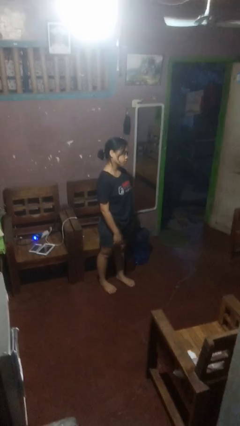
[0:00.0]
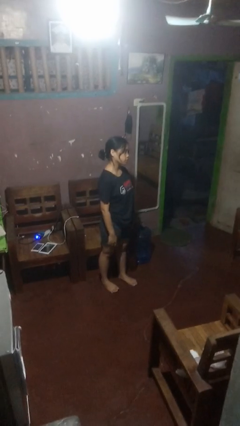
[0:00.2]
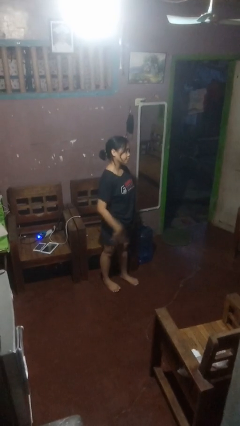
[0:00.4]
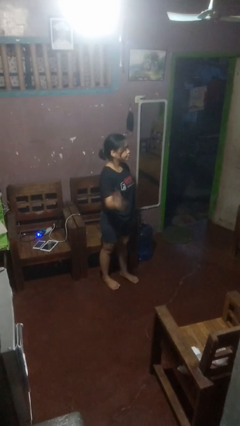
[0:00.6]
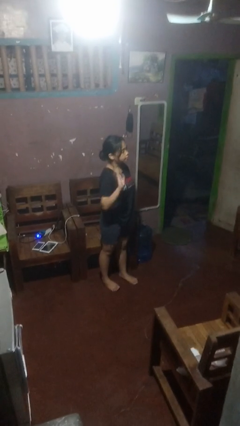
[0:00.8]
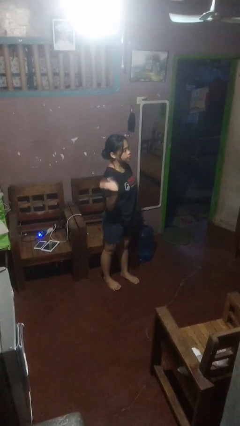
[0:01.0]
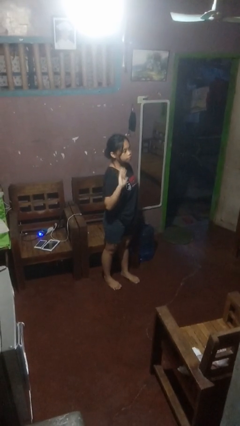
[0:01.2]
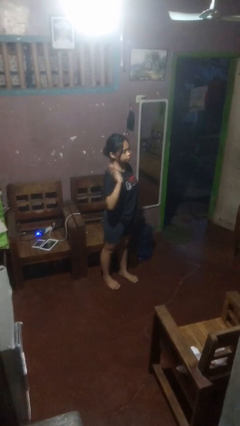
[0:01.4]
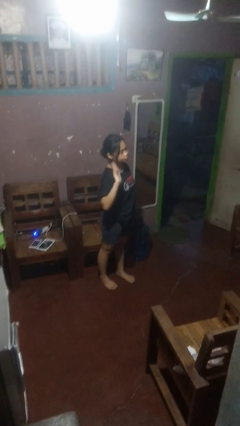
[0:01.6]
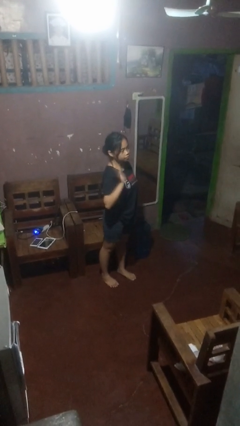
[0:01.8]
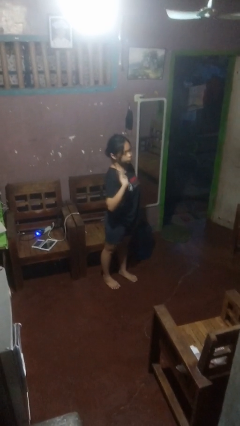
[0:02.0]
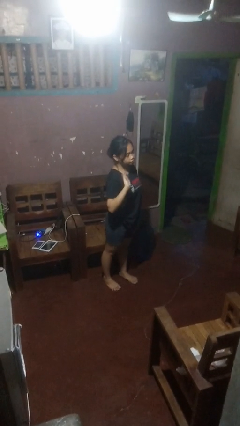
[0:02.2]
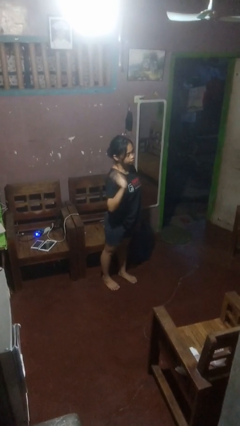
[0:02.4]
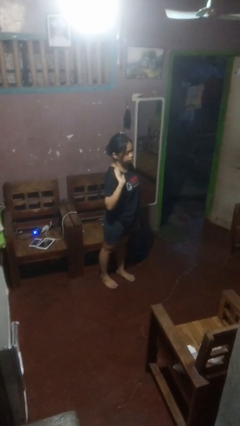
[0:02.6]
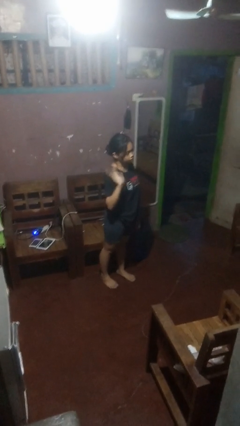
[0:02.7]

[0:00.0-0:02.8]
person waves at person

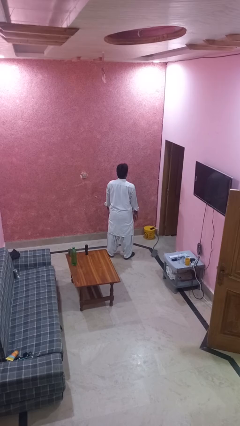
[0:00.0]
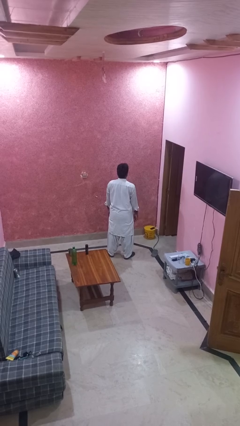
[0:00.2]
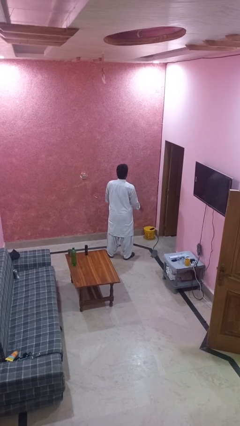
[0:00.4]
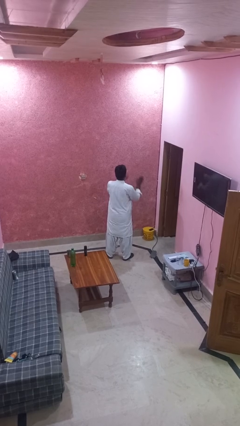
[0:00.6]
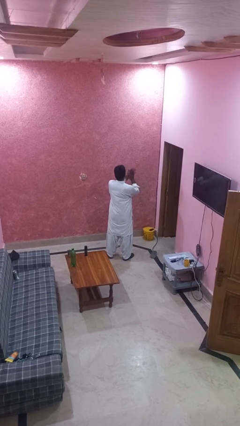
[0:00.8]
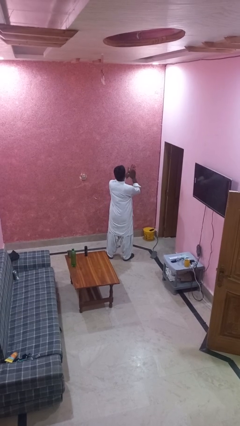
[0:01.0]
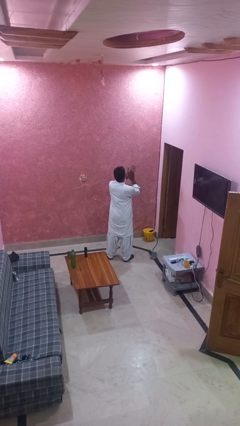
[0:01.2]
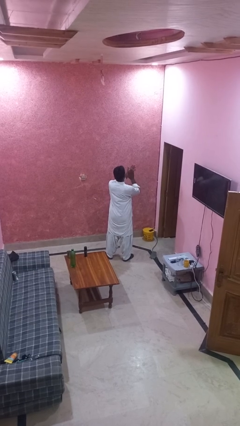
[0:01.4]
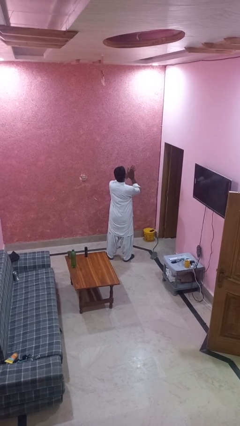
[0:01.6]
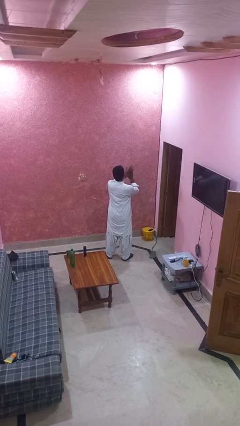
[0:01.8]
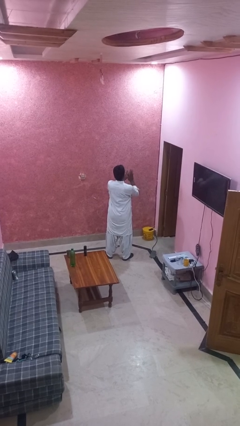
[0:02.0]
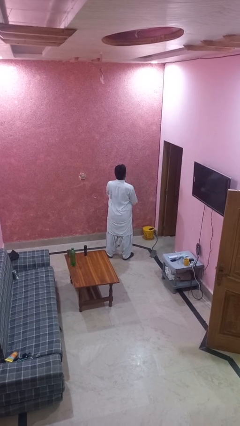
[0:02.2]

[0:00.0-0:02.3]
person claps hands

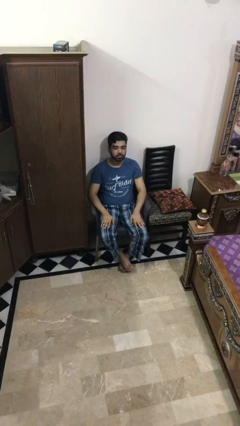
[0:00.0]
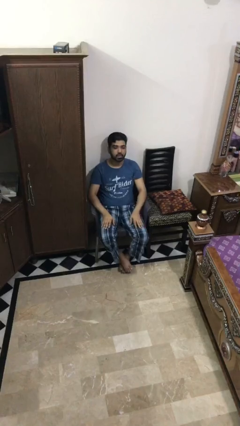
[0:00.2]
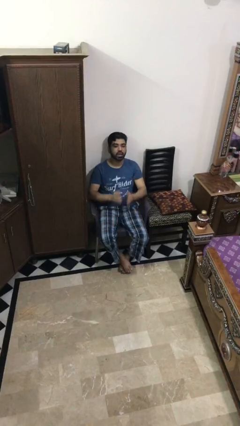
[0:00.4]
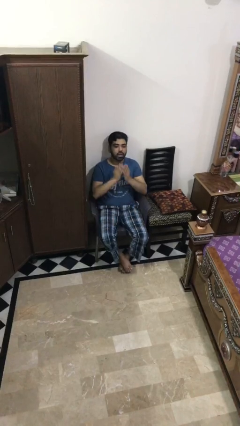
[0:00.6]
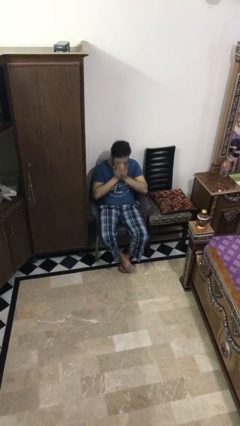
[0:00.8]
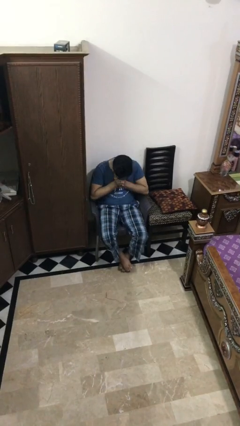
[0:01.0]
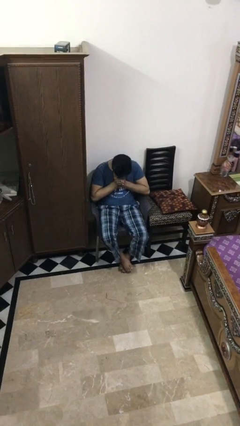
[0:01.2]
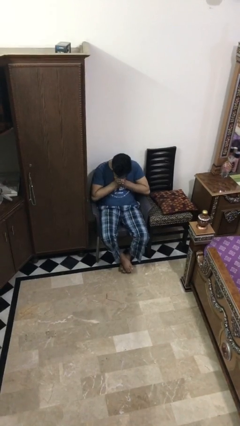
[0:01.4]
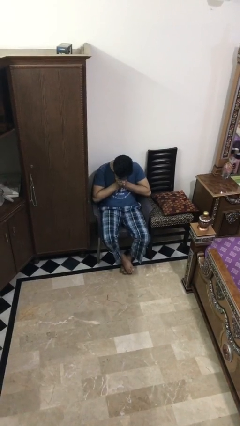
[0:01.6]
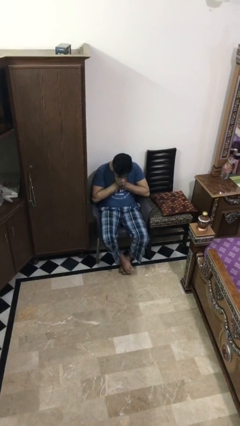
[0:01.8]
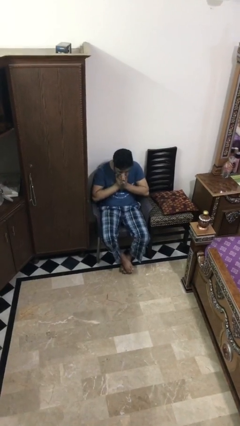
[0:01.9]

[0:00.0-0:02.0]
person sneezes into hand

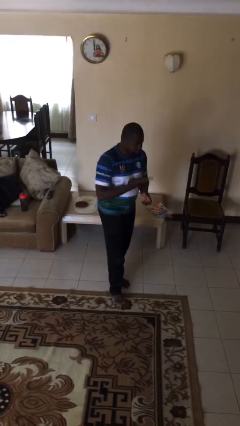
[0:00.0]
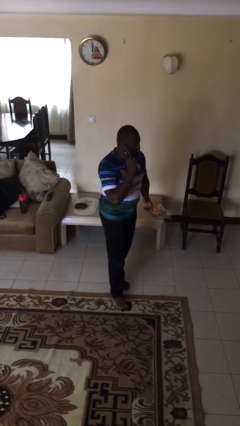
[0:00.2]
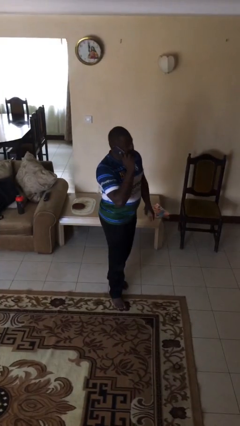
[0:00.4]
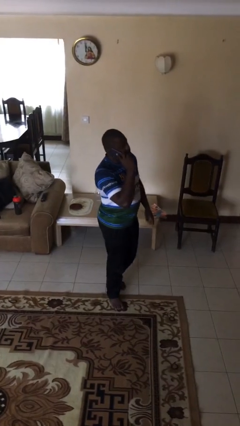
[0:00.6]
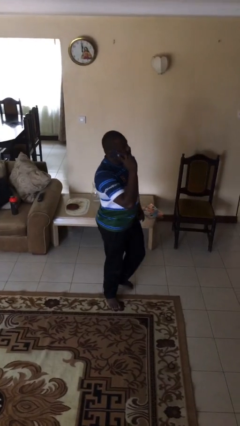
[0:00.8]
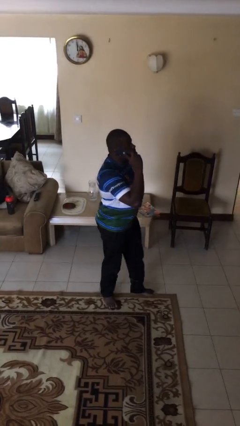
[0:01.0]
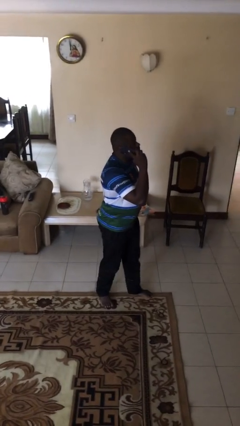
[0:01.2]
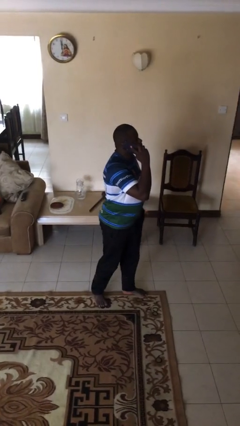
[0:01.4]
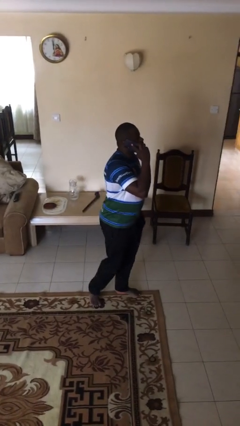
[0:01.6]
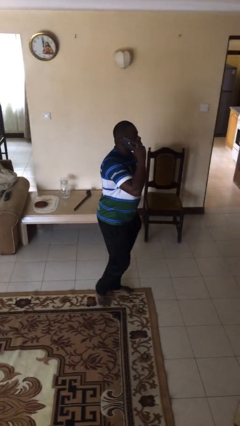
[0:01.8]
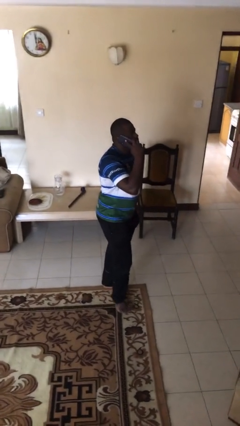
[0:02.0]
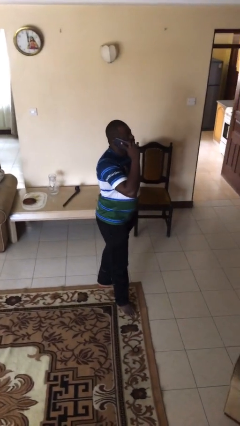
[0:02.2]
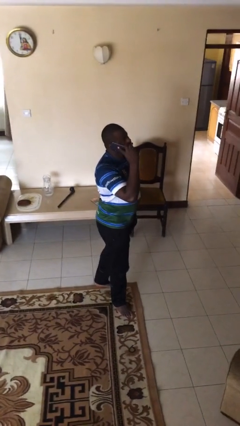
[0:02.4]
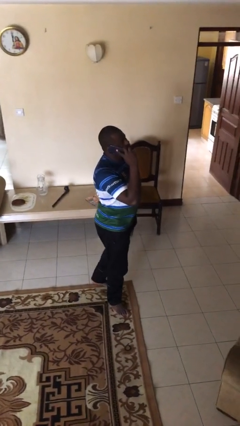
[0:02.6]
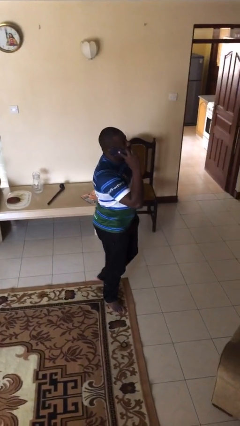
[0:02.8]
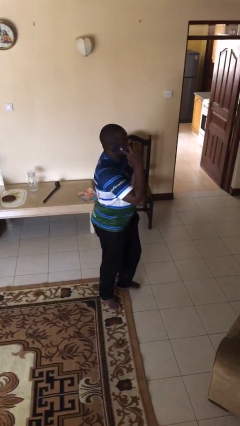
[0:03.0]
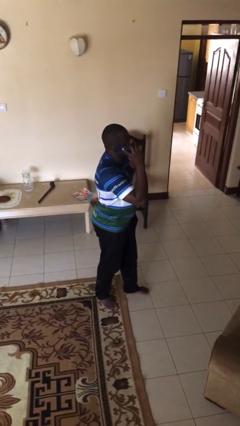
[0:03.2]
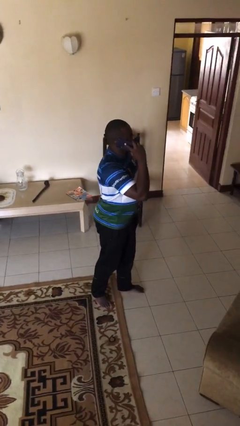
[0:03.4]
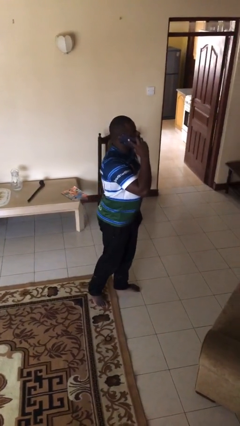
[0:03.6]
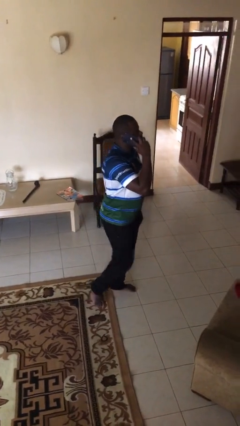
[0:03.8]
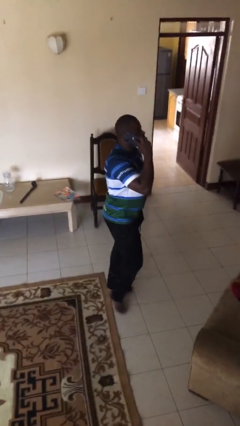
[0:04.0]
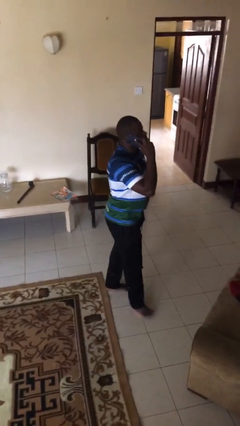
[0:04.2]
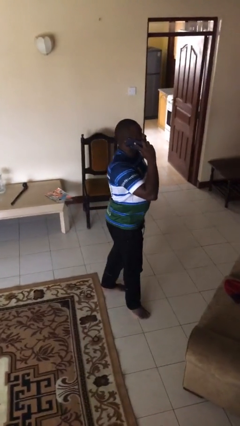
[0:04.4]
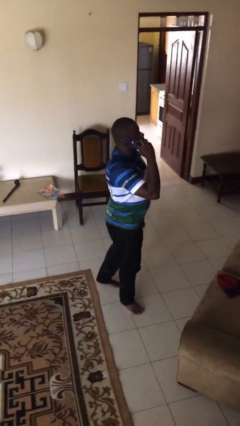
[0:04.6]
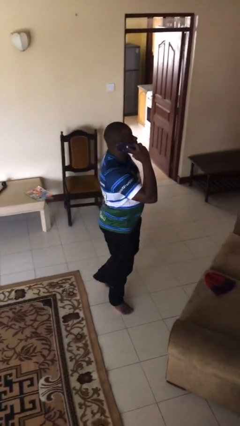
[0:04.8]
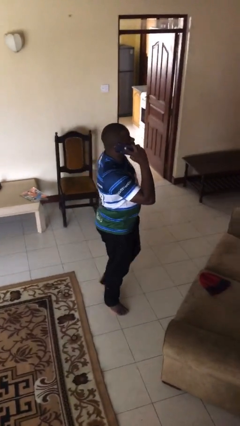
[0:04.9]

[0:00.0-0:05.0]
person talks on phone

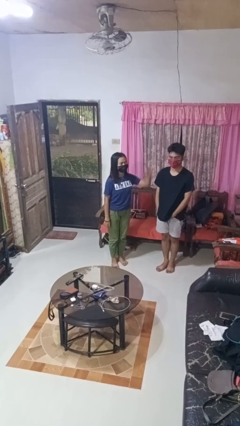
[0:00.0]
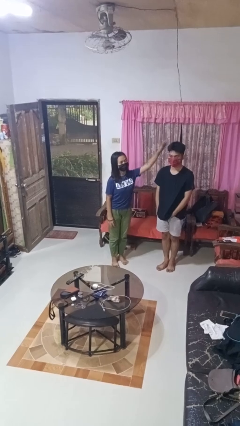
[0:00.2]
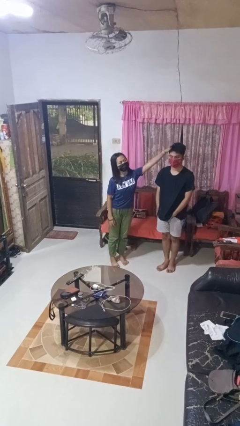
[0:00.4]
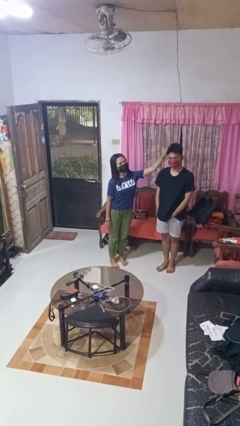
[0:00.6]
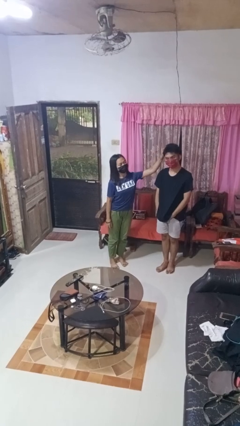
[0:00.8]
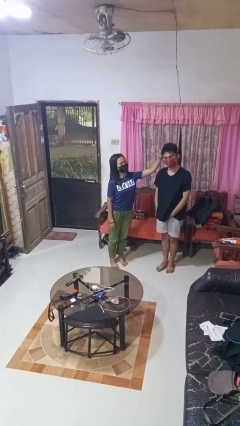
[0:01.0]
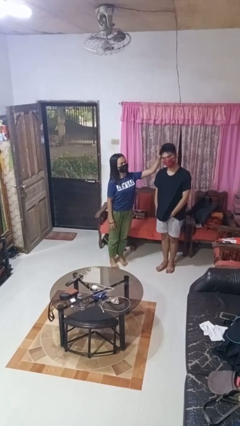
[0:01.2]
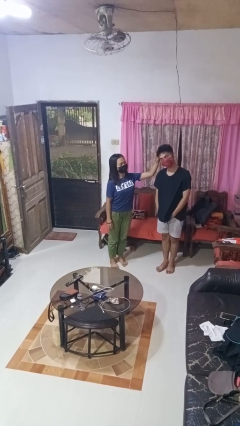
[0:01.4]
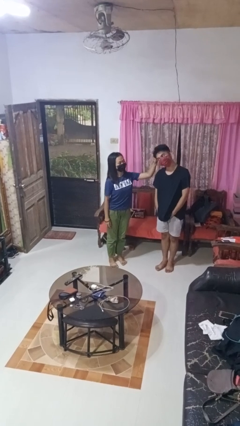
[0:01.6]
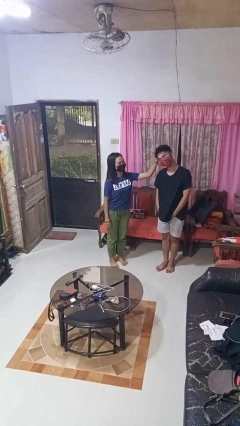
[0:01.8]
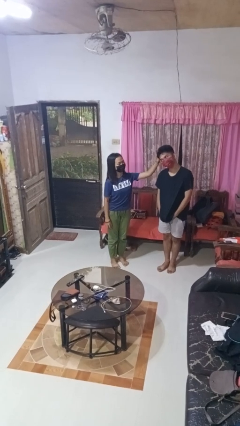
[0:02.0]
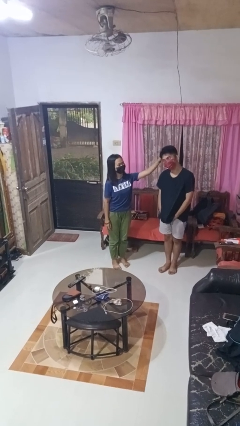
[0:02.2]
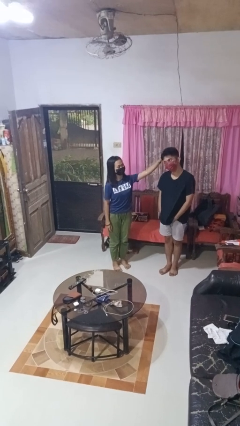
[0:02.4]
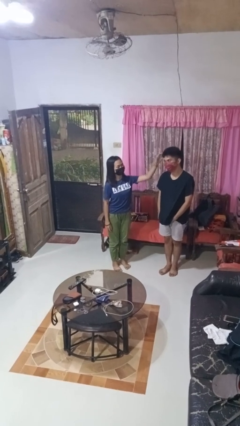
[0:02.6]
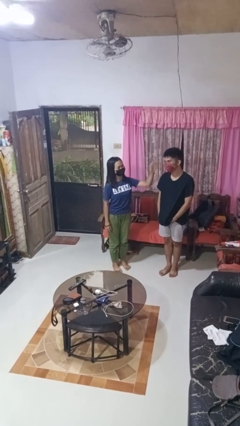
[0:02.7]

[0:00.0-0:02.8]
person grabs person by hair

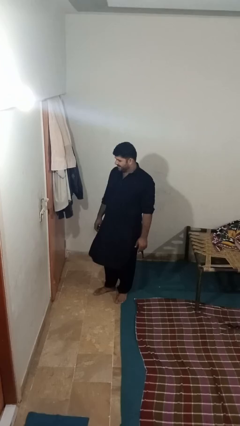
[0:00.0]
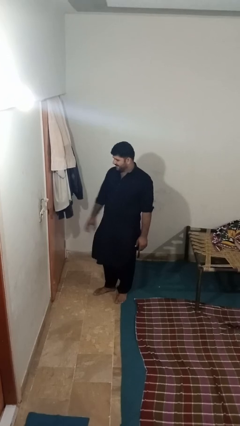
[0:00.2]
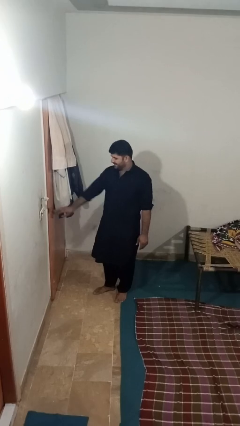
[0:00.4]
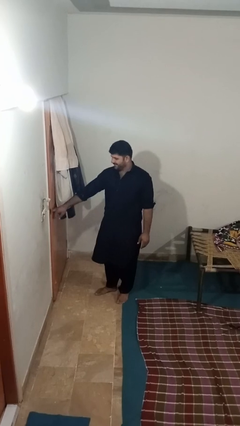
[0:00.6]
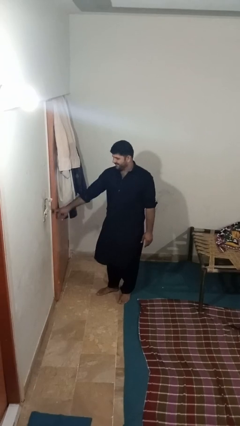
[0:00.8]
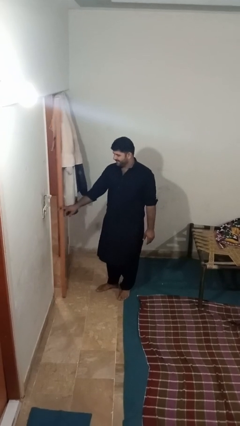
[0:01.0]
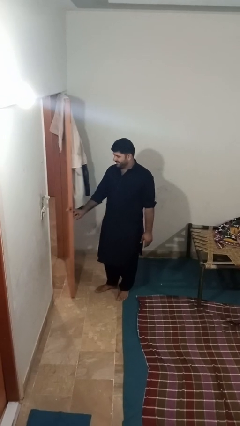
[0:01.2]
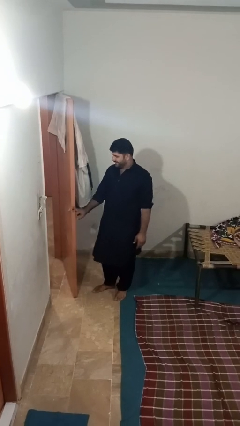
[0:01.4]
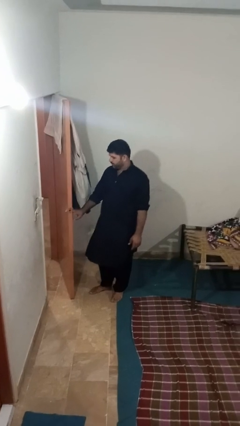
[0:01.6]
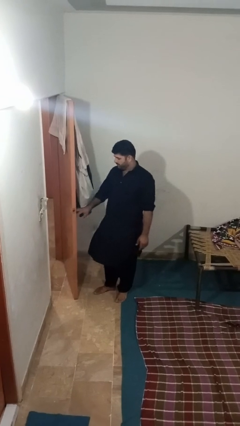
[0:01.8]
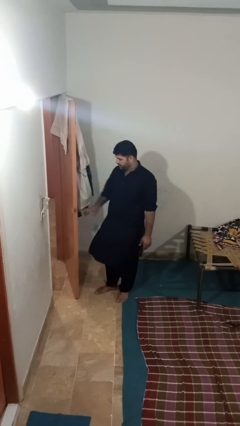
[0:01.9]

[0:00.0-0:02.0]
person opens facility door

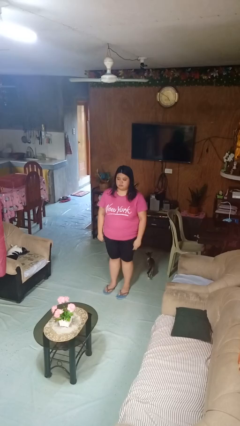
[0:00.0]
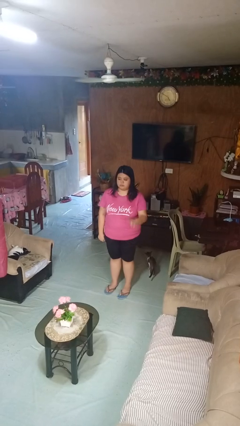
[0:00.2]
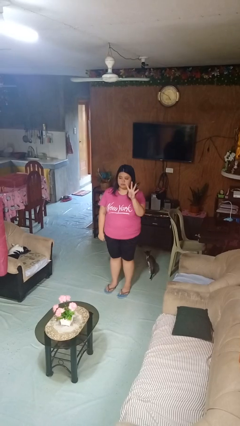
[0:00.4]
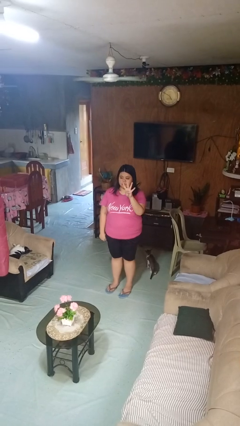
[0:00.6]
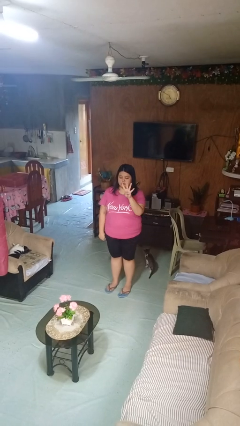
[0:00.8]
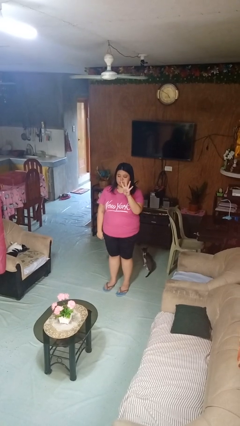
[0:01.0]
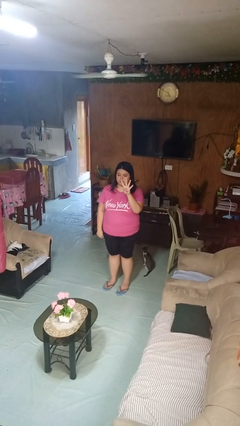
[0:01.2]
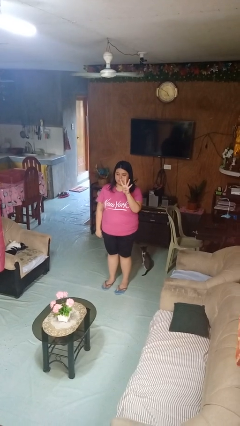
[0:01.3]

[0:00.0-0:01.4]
person gestures number four
